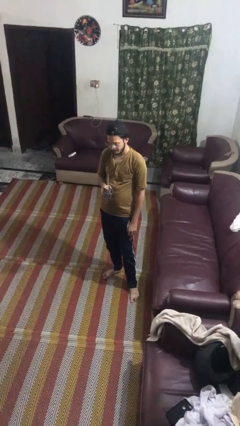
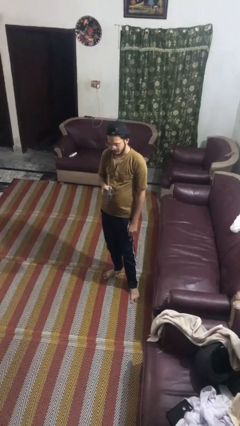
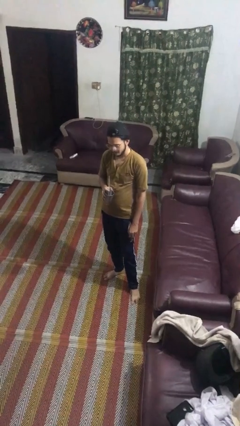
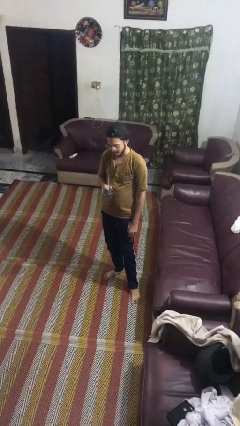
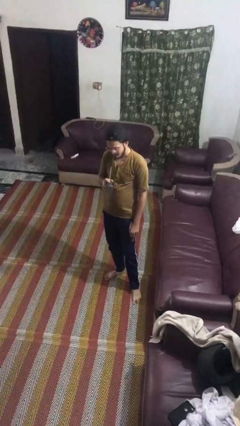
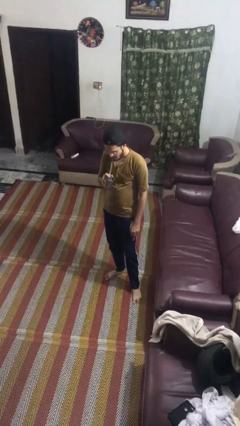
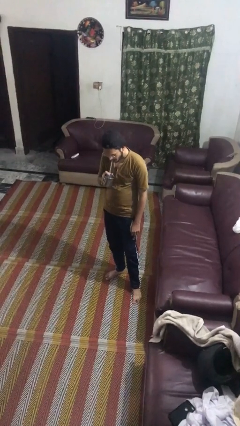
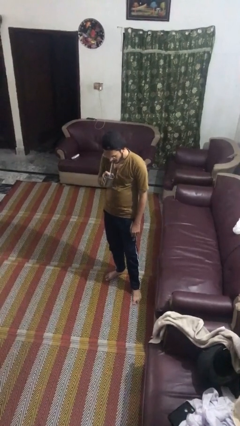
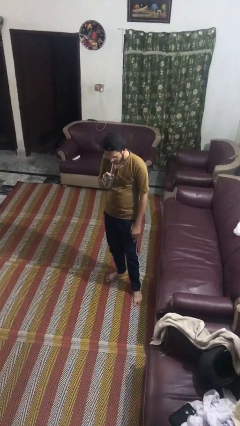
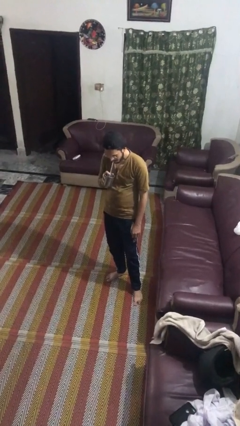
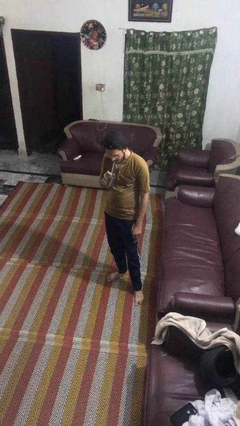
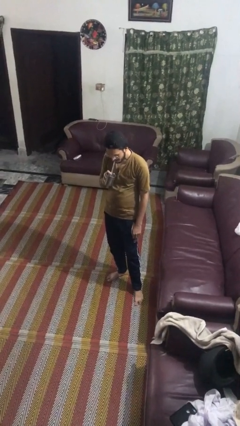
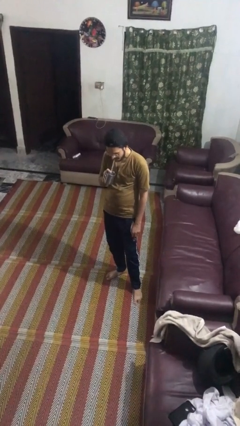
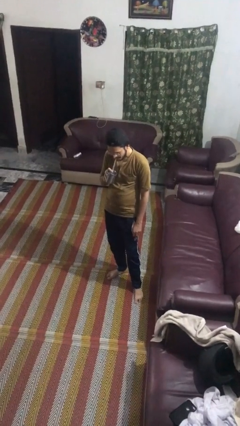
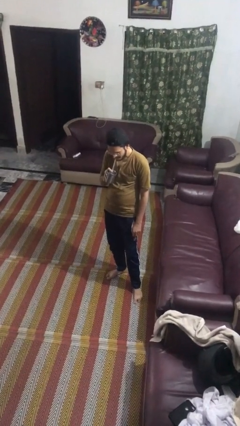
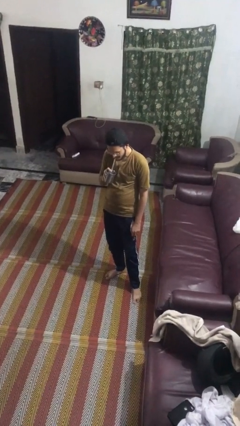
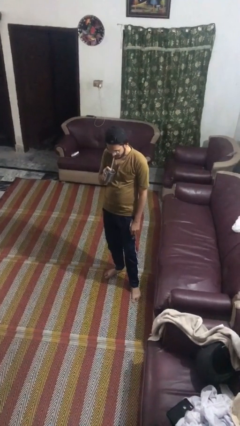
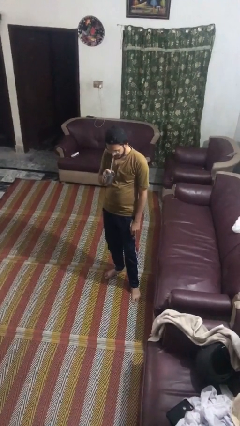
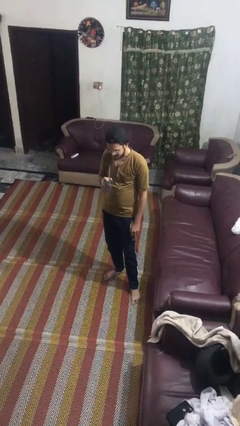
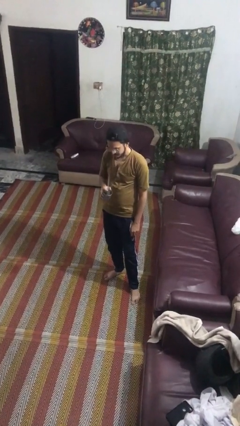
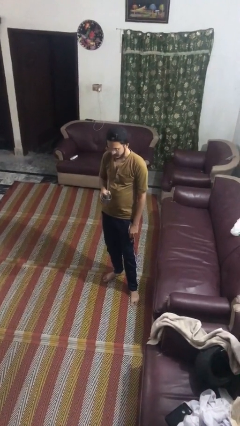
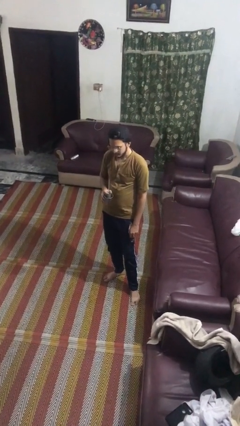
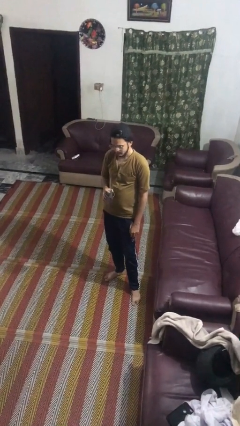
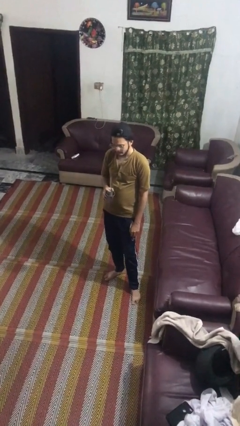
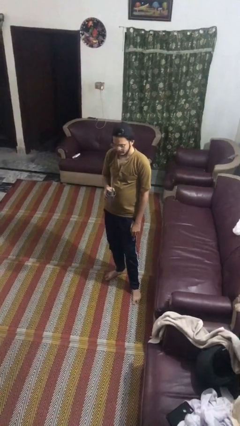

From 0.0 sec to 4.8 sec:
person drinks from straw

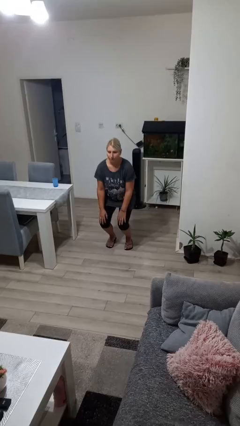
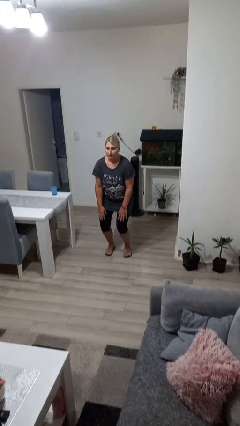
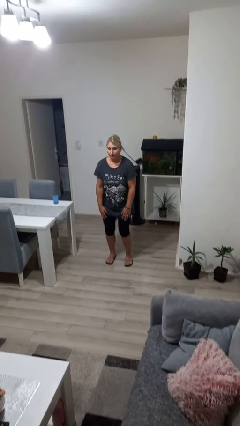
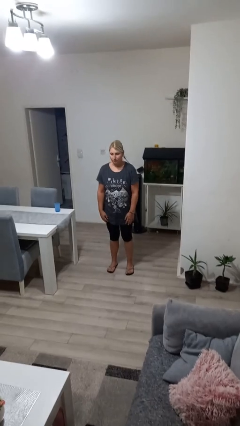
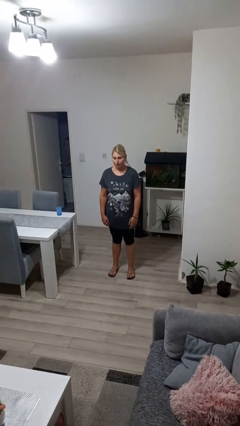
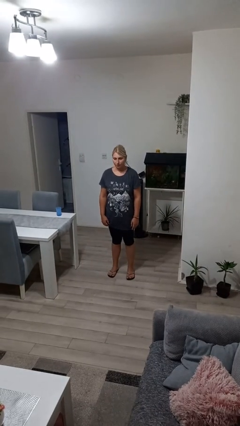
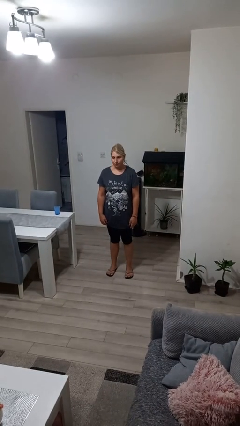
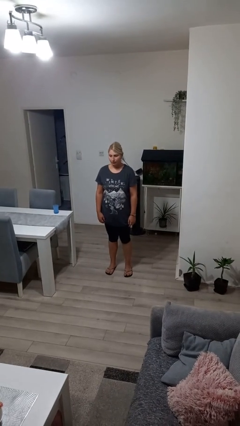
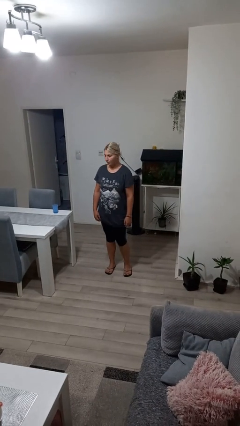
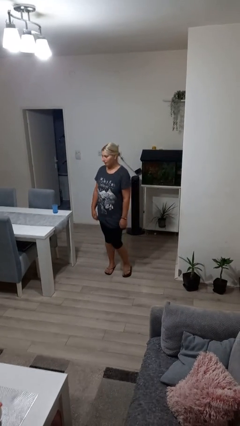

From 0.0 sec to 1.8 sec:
person stands up

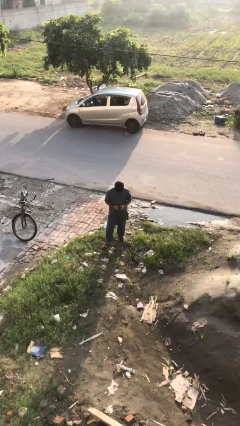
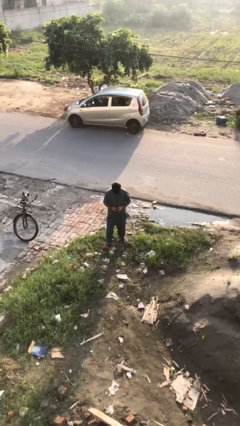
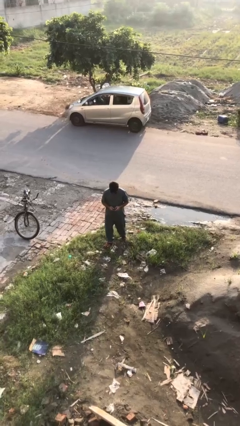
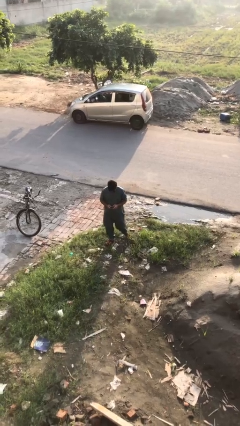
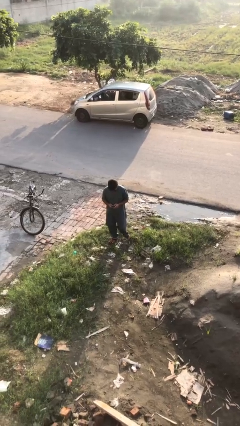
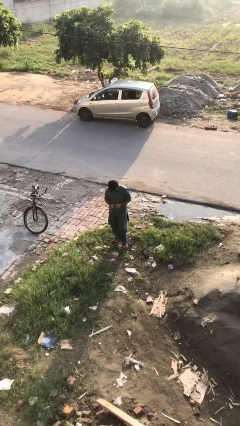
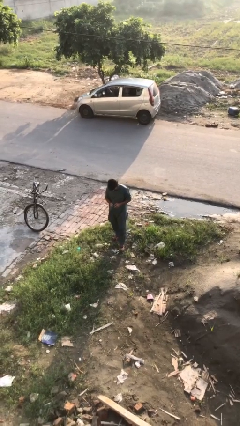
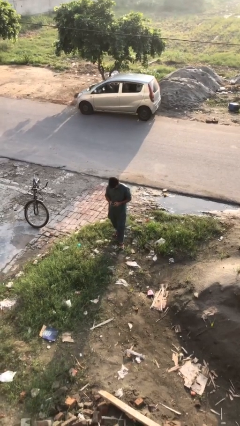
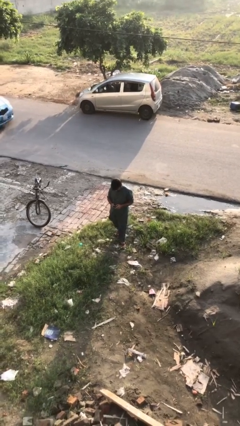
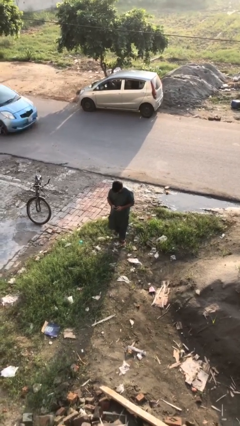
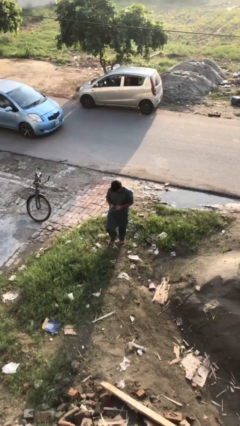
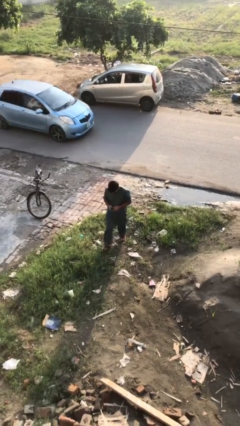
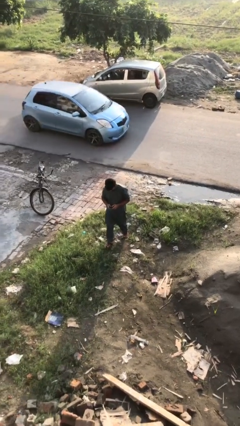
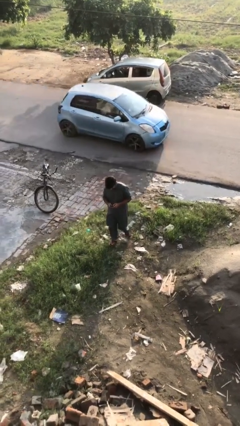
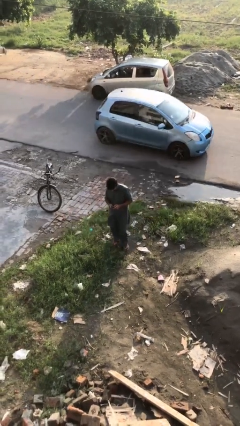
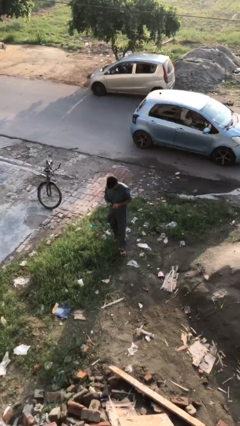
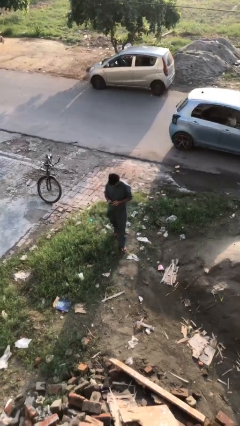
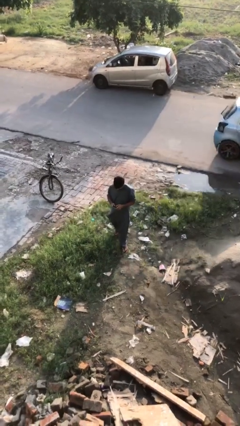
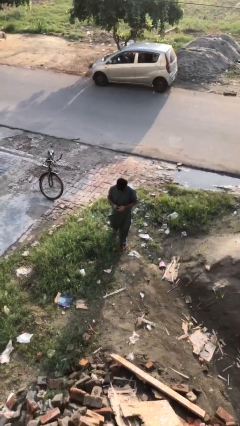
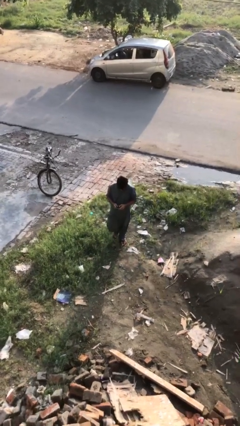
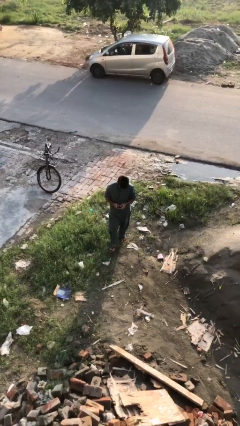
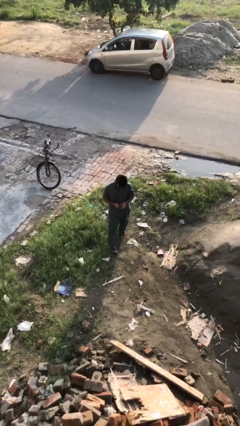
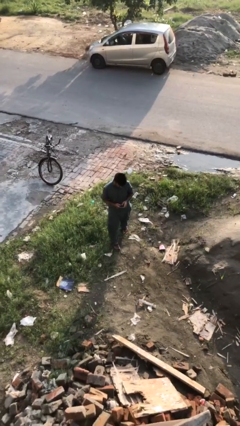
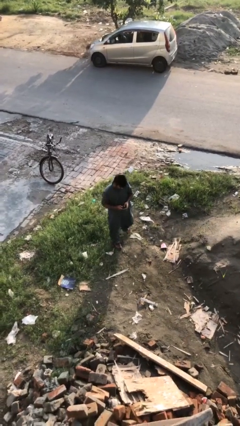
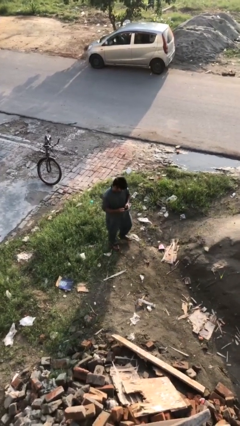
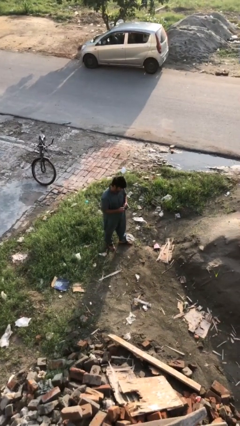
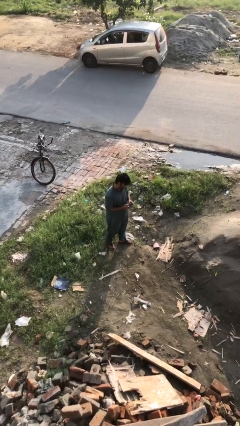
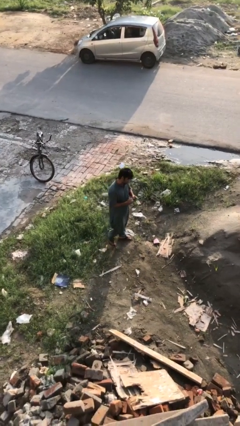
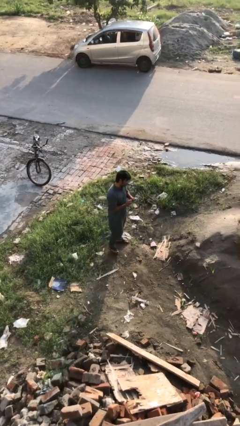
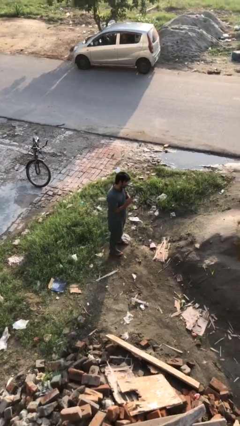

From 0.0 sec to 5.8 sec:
person texts on phone

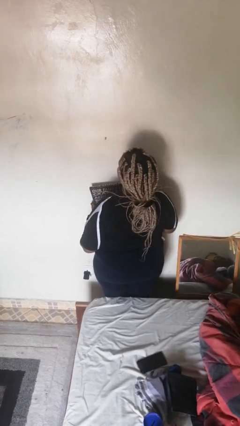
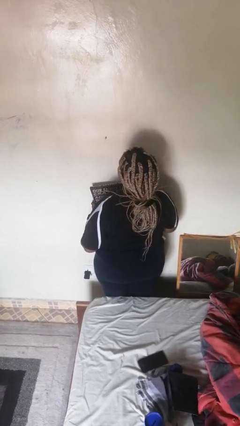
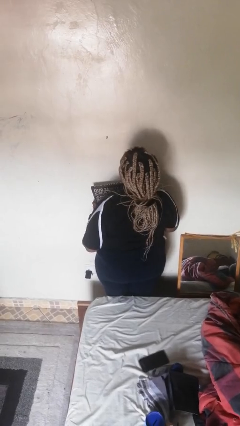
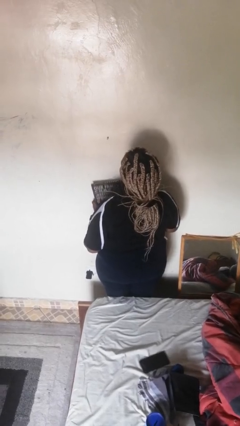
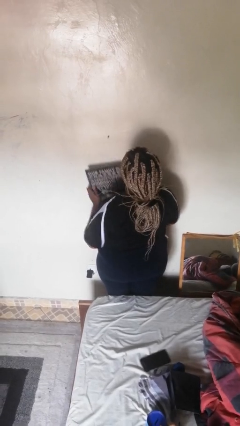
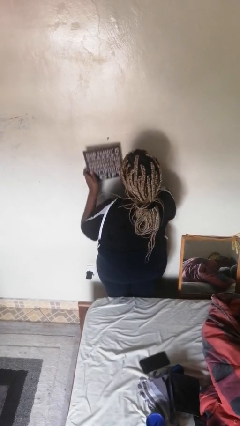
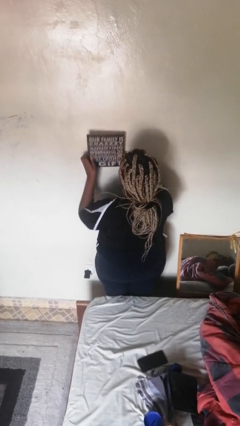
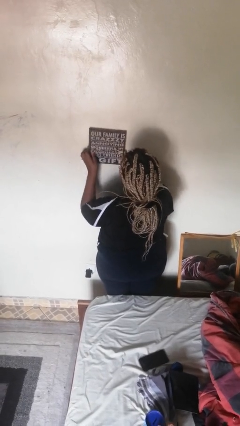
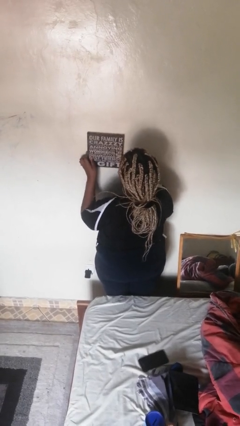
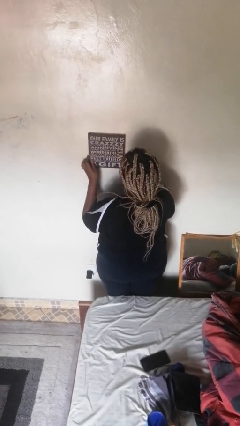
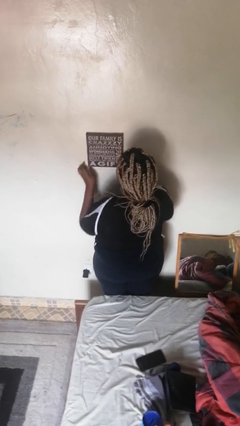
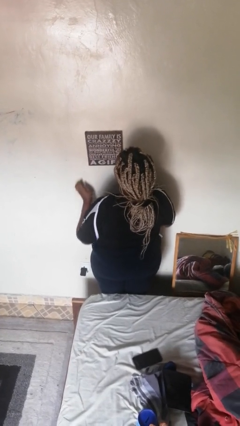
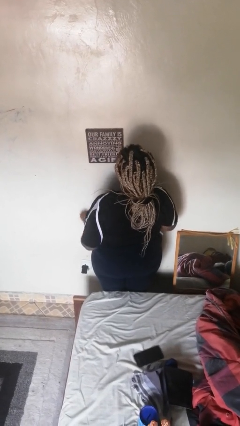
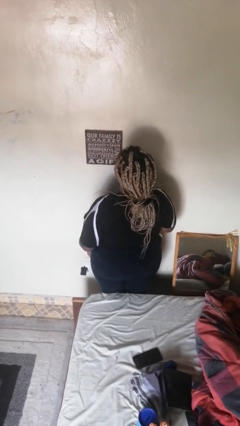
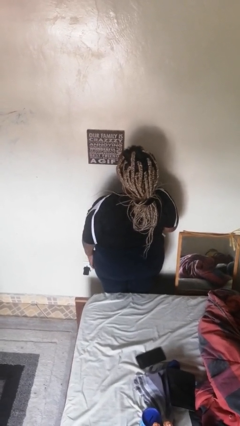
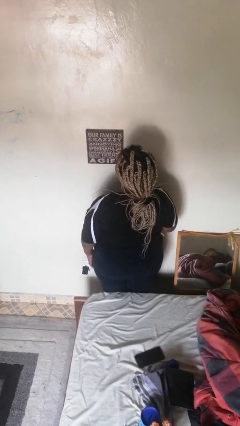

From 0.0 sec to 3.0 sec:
person puts up picture frame

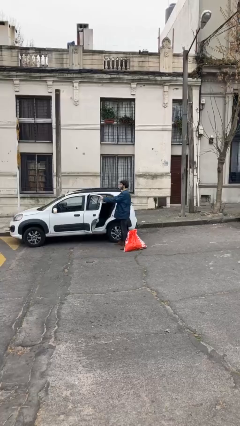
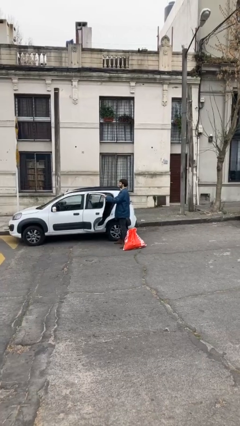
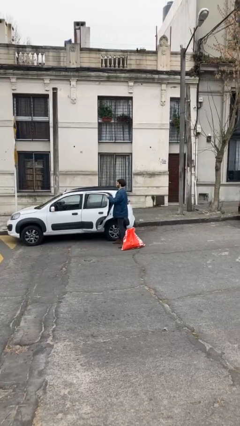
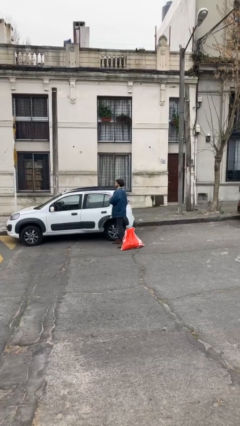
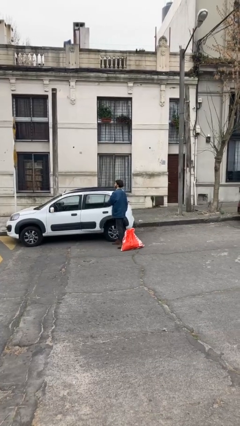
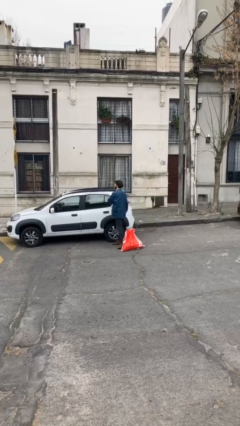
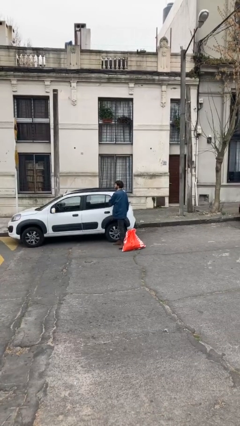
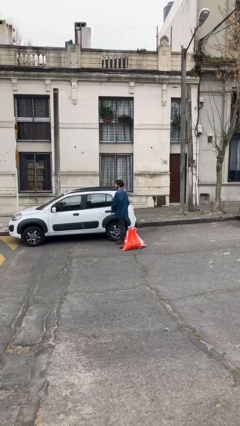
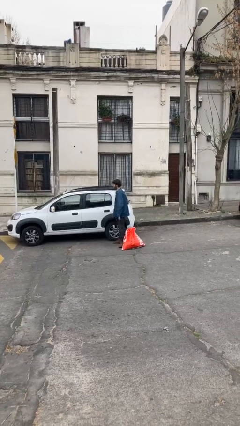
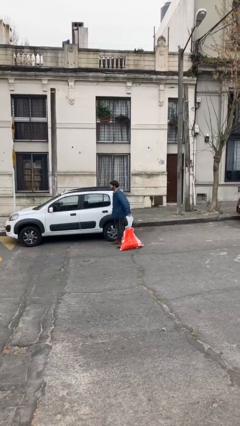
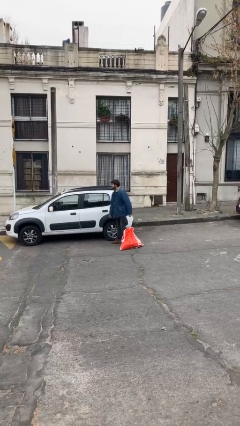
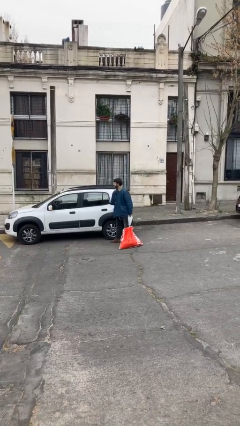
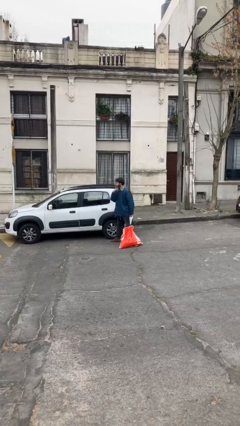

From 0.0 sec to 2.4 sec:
person closes car door

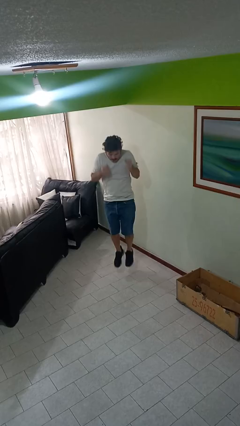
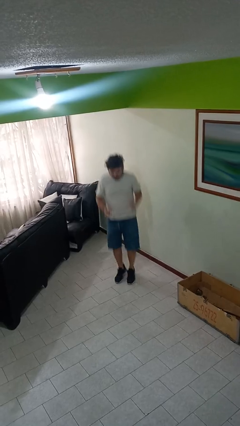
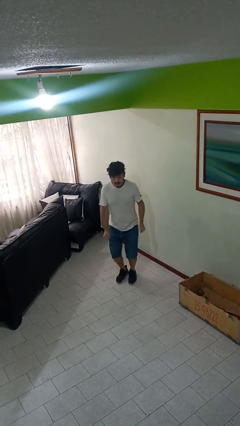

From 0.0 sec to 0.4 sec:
person jumps
